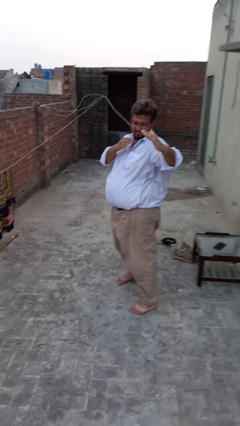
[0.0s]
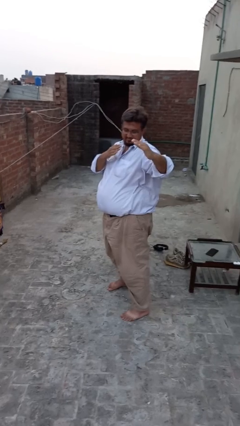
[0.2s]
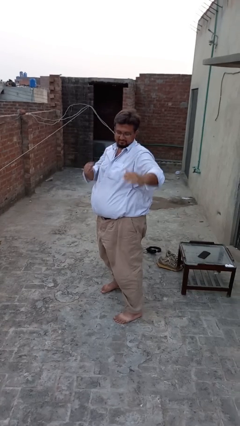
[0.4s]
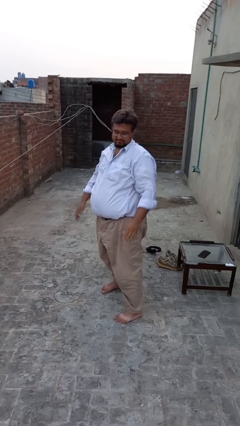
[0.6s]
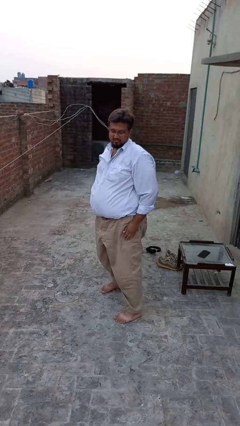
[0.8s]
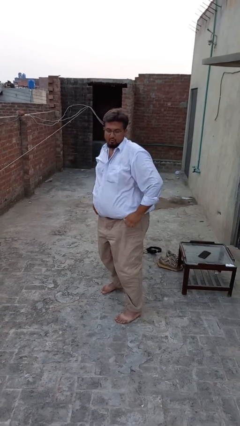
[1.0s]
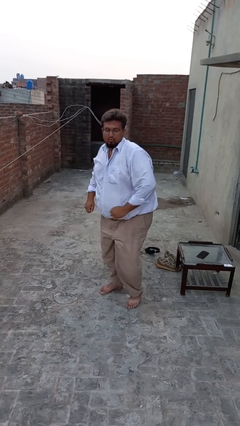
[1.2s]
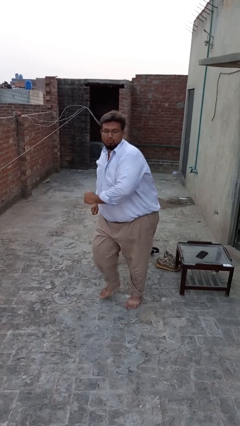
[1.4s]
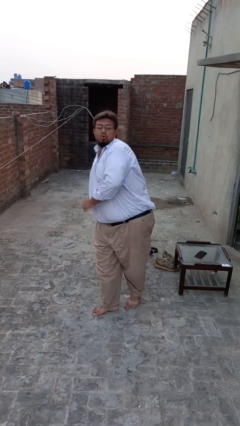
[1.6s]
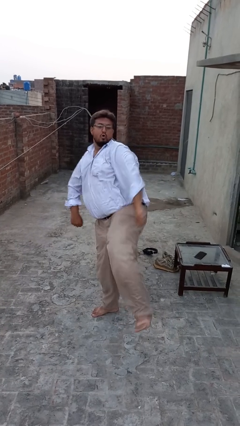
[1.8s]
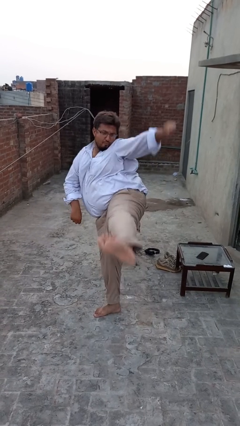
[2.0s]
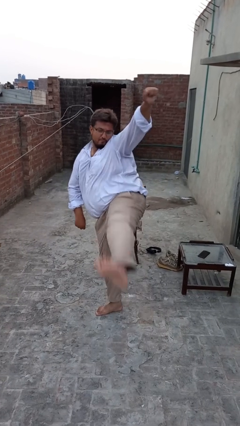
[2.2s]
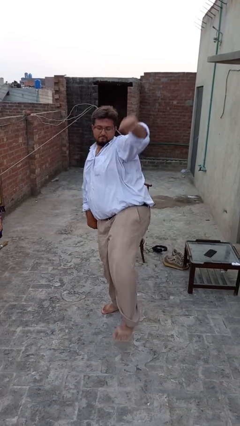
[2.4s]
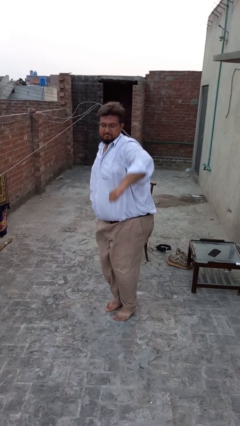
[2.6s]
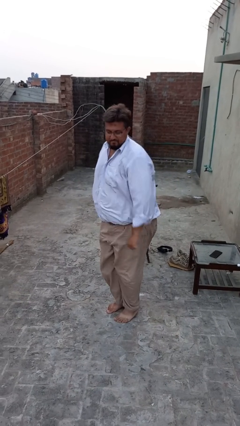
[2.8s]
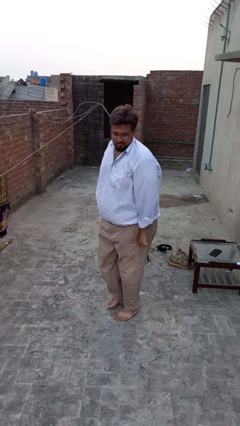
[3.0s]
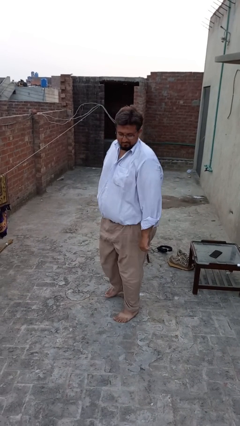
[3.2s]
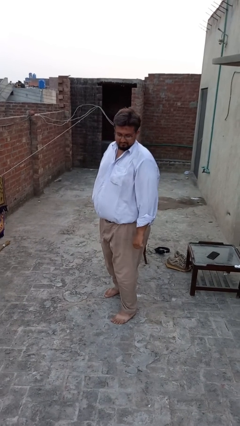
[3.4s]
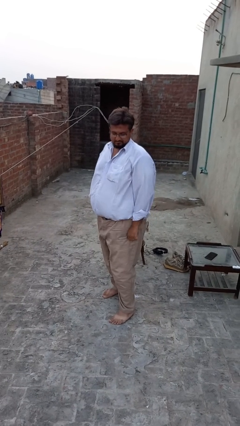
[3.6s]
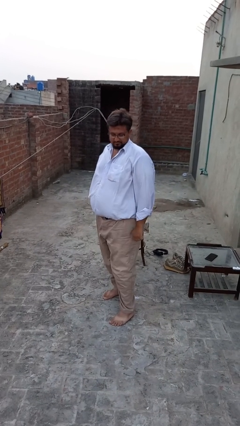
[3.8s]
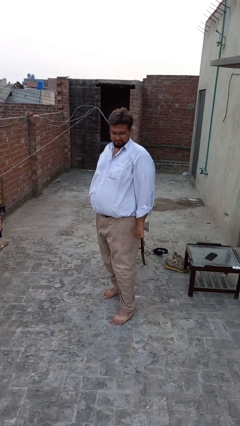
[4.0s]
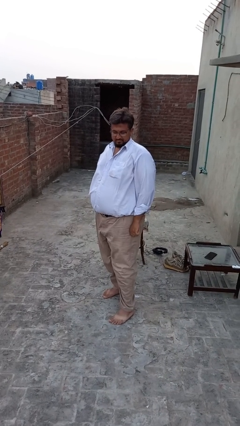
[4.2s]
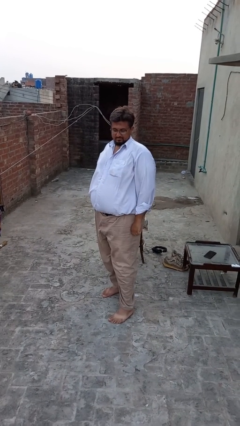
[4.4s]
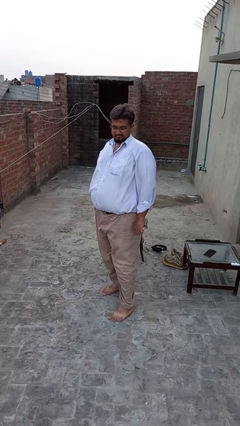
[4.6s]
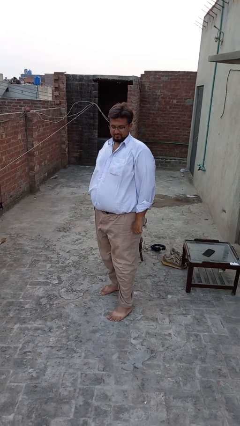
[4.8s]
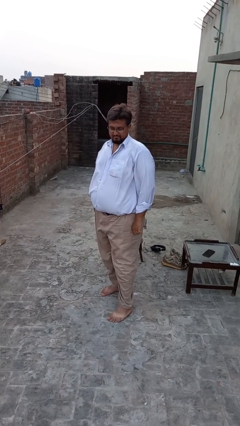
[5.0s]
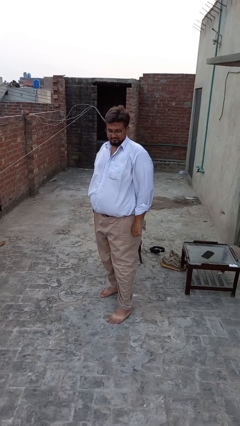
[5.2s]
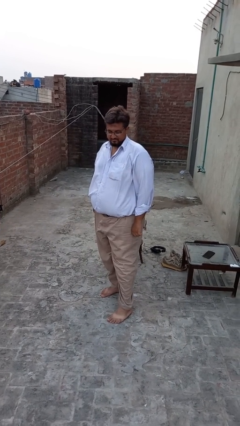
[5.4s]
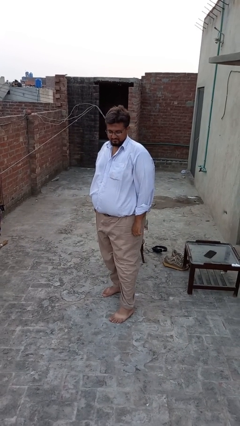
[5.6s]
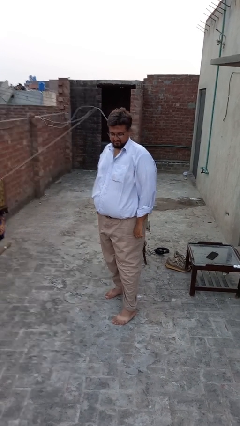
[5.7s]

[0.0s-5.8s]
person karate kicks

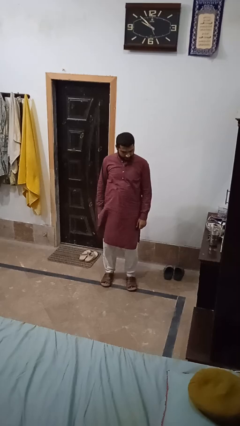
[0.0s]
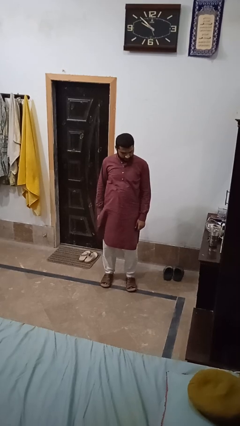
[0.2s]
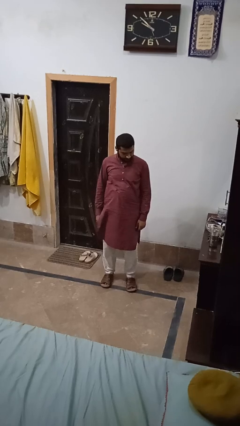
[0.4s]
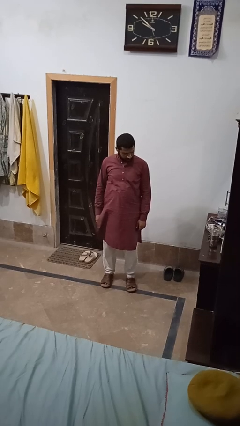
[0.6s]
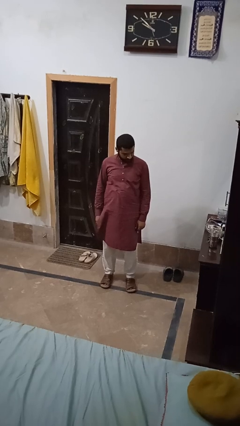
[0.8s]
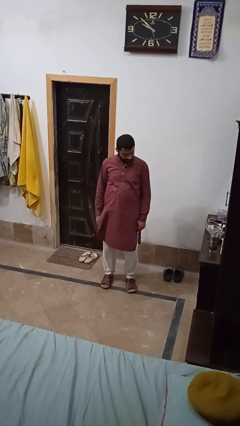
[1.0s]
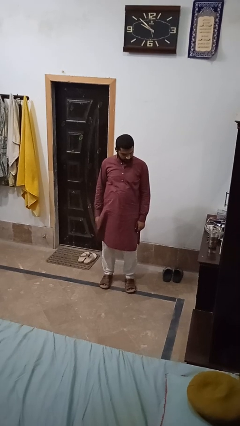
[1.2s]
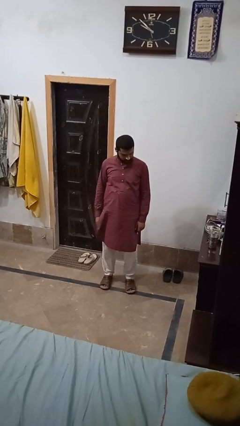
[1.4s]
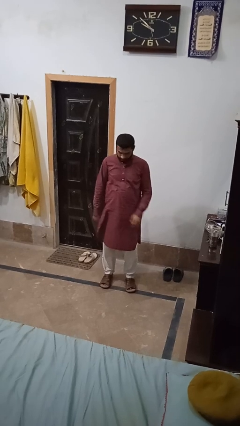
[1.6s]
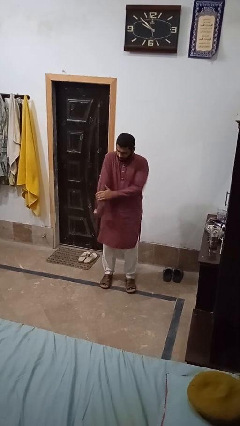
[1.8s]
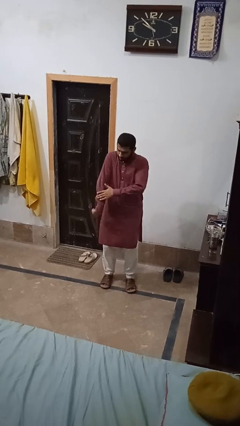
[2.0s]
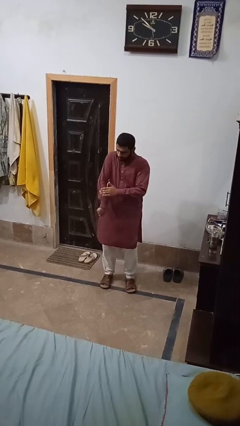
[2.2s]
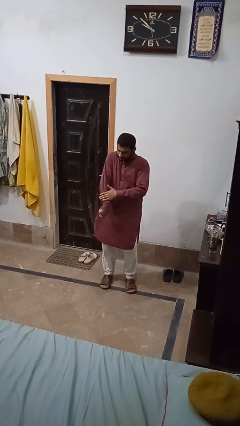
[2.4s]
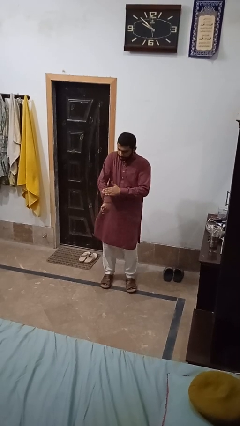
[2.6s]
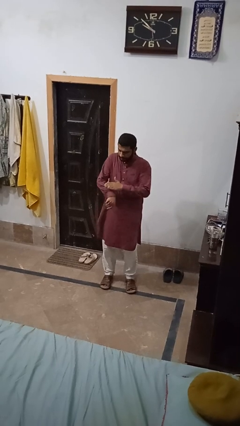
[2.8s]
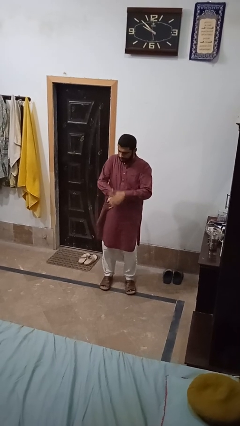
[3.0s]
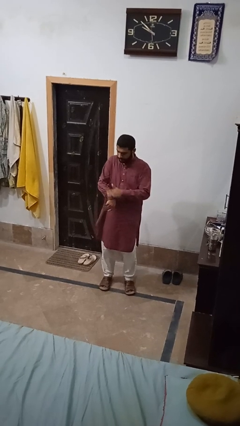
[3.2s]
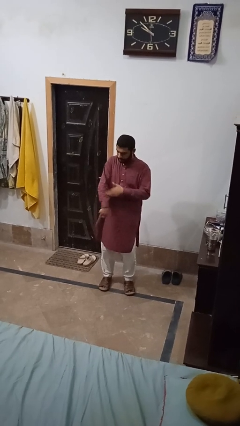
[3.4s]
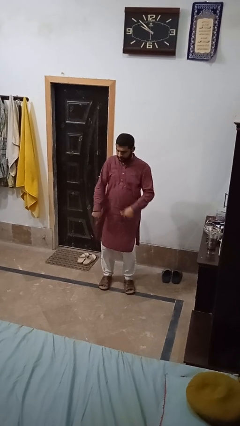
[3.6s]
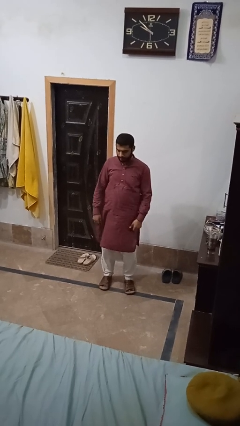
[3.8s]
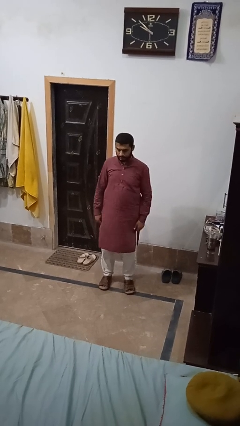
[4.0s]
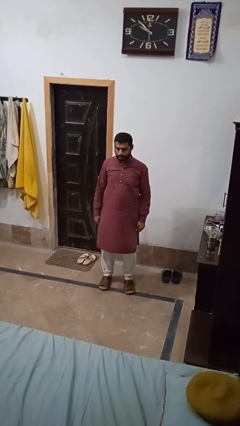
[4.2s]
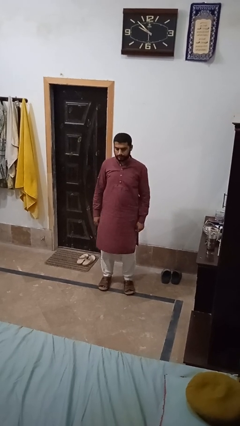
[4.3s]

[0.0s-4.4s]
person swats bug

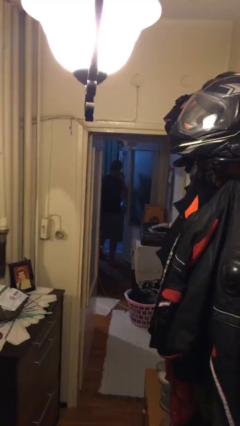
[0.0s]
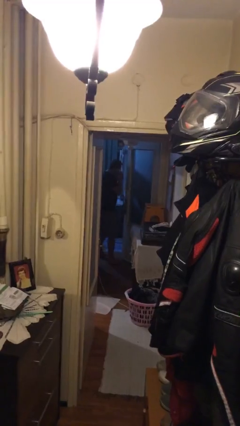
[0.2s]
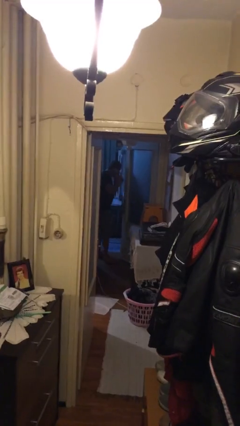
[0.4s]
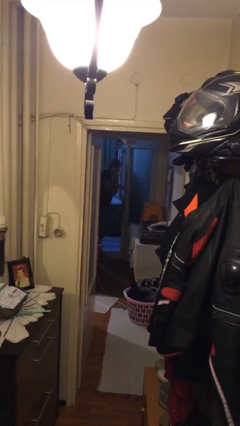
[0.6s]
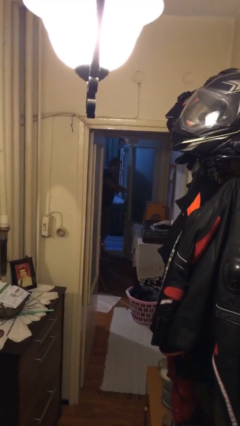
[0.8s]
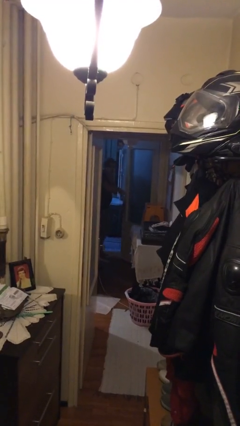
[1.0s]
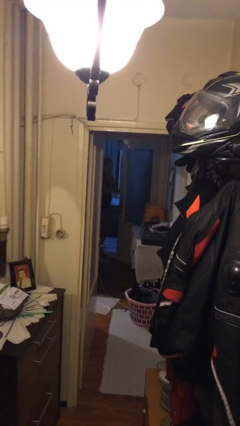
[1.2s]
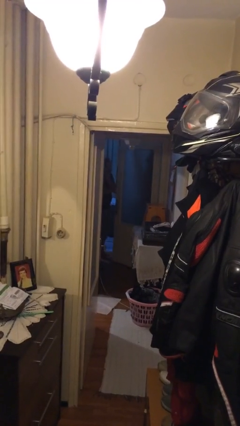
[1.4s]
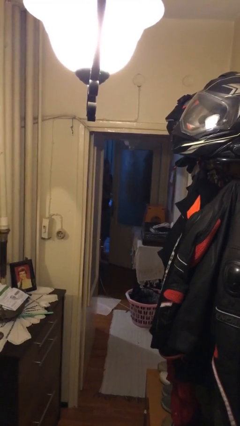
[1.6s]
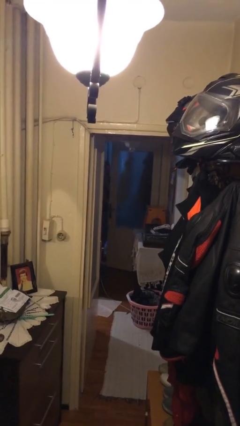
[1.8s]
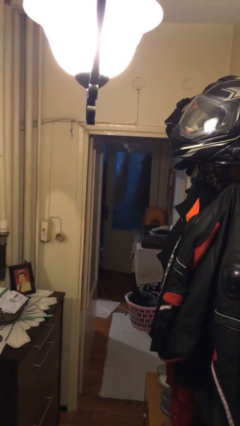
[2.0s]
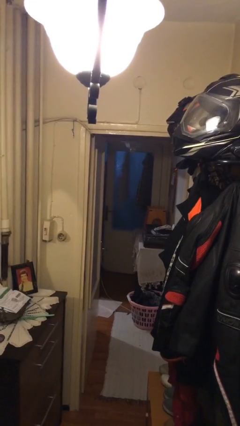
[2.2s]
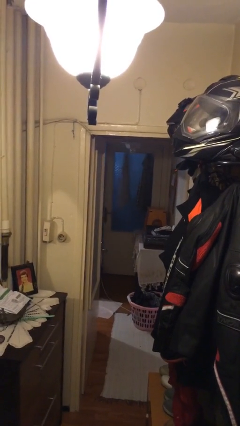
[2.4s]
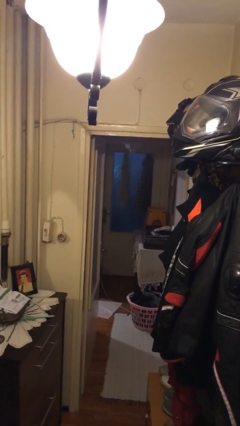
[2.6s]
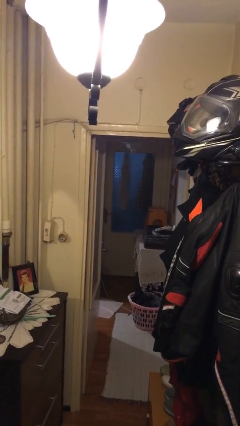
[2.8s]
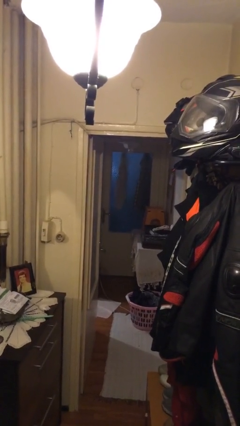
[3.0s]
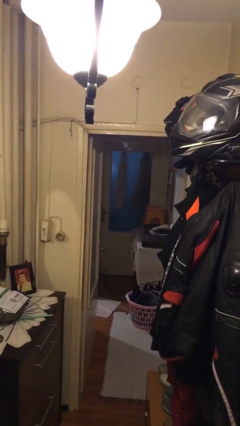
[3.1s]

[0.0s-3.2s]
person closes facility door

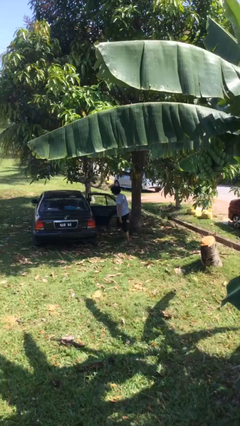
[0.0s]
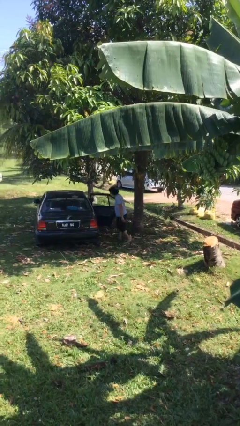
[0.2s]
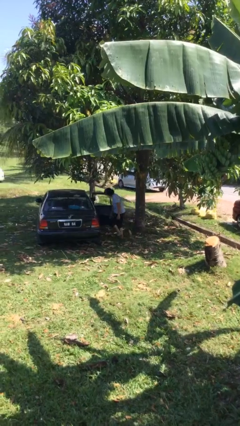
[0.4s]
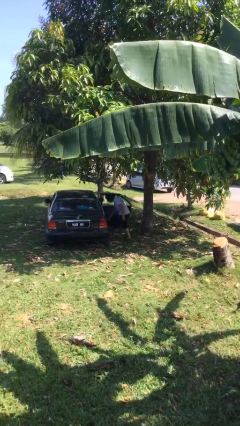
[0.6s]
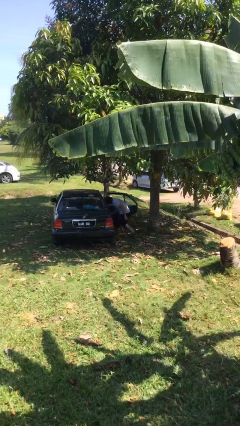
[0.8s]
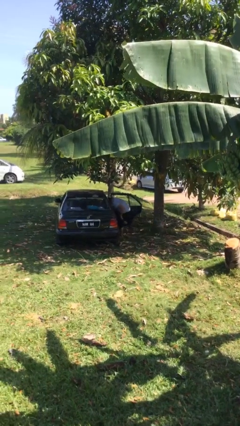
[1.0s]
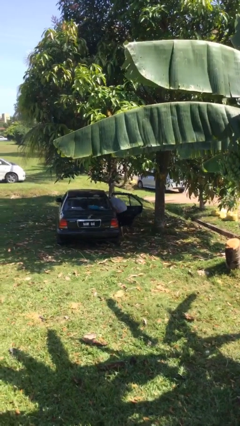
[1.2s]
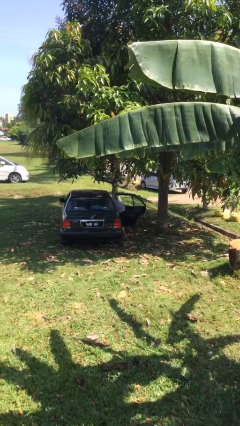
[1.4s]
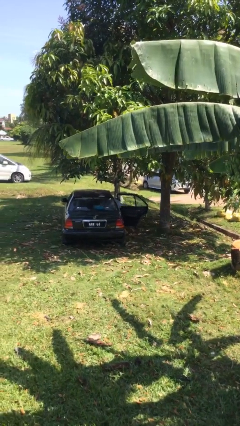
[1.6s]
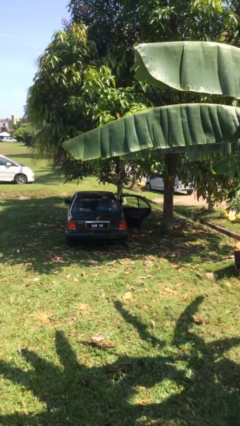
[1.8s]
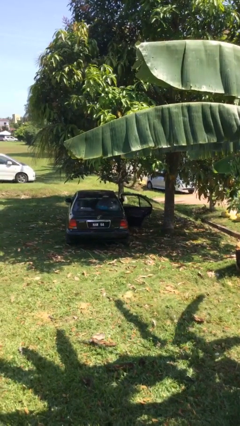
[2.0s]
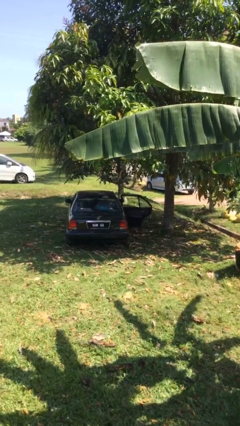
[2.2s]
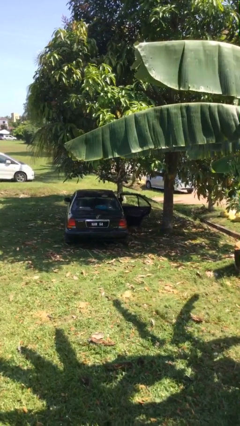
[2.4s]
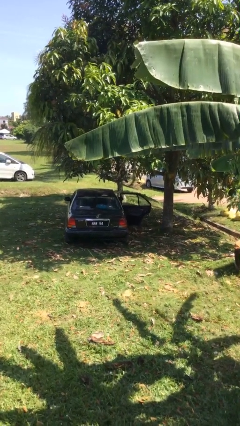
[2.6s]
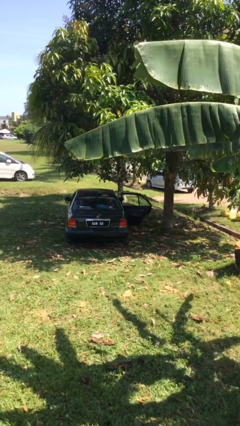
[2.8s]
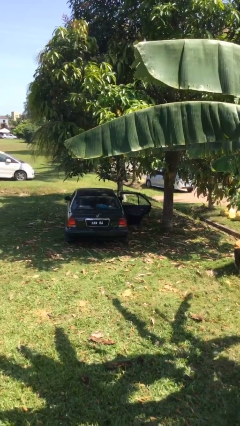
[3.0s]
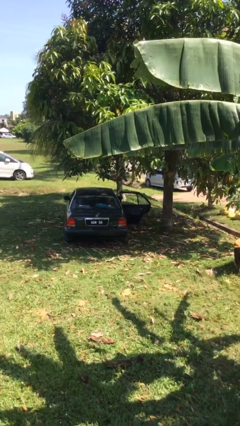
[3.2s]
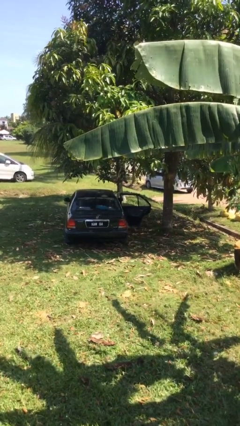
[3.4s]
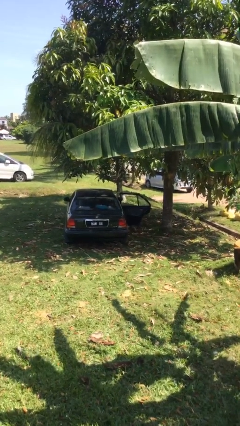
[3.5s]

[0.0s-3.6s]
person enters car

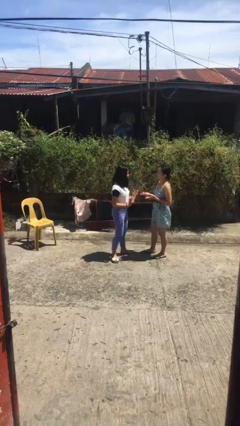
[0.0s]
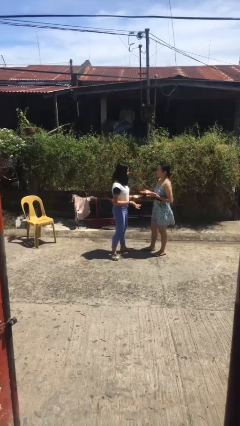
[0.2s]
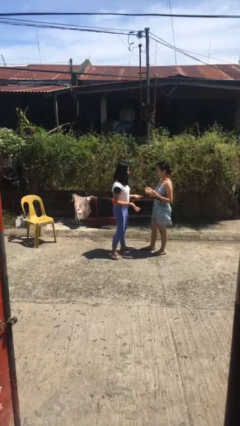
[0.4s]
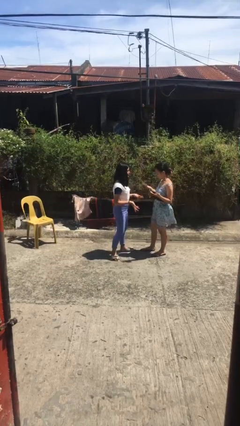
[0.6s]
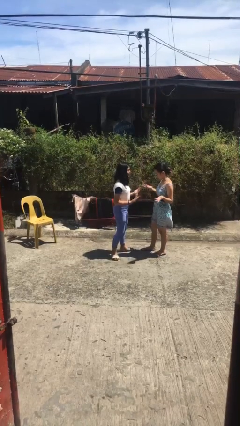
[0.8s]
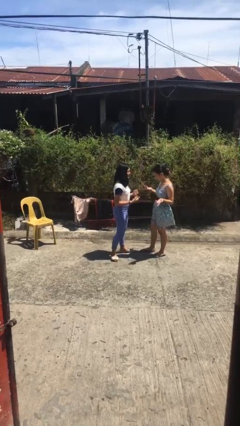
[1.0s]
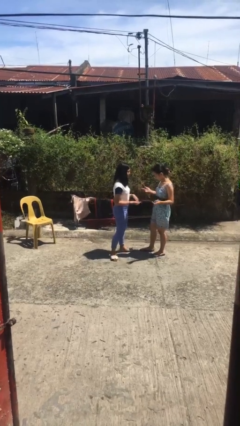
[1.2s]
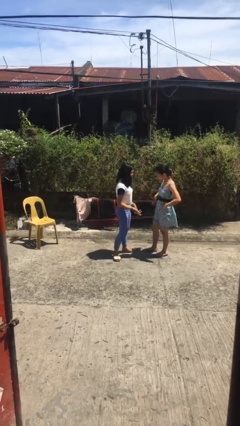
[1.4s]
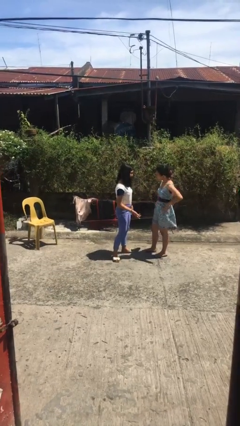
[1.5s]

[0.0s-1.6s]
person talks to person
